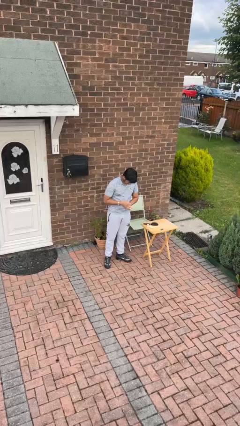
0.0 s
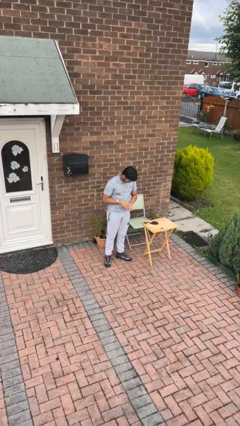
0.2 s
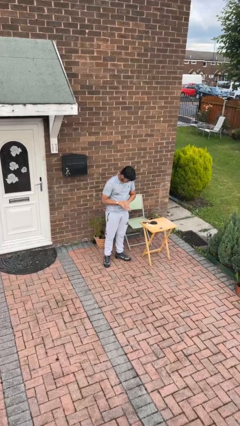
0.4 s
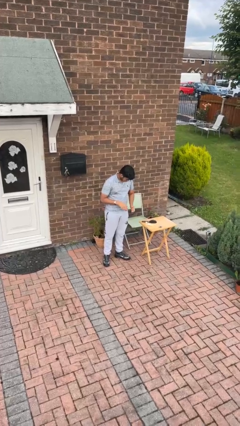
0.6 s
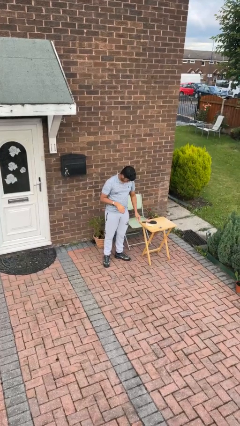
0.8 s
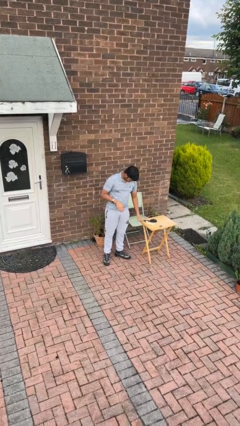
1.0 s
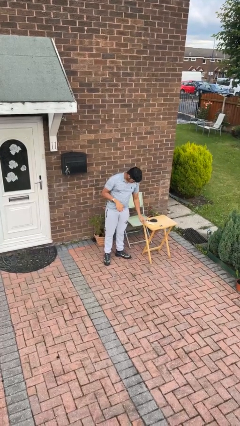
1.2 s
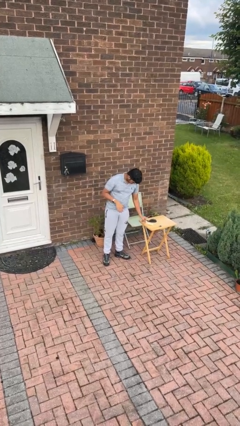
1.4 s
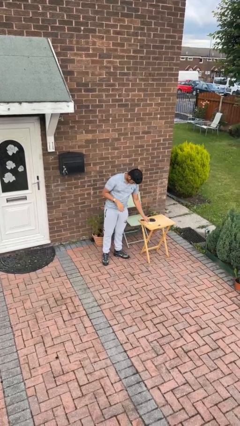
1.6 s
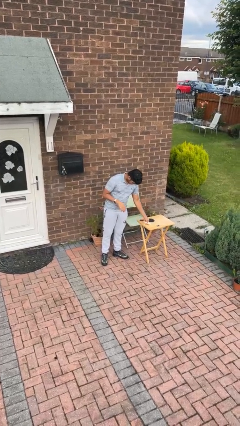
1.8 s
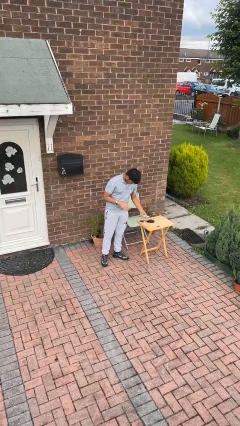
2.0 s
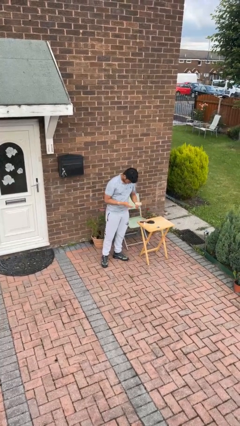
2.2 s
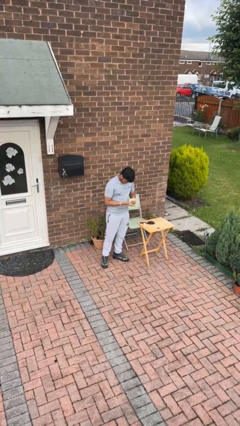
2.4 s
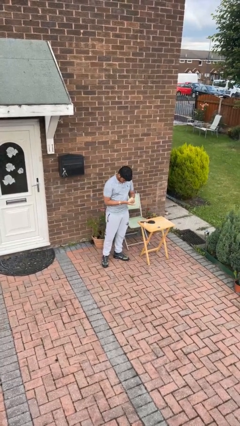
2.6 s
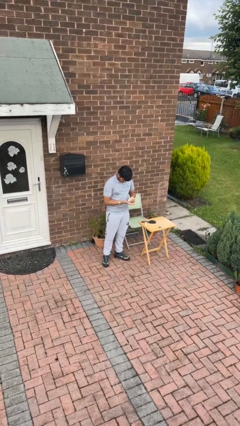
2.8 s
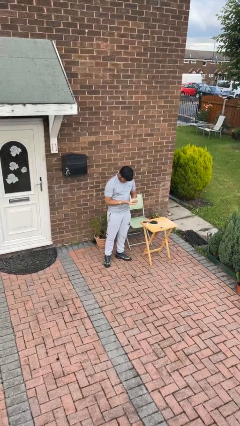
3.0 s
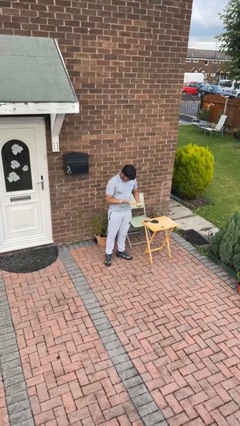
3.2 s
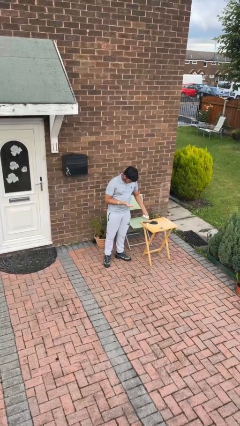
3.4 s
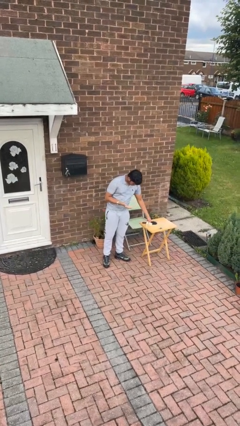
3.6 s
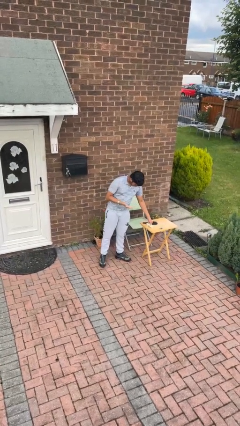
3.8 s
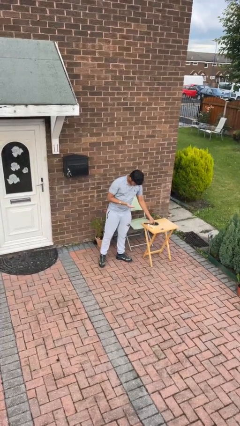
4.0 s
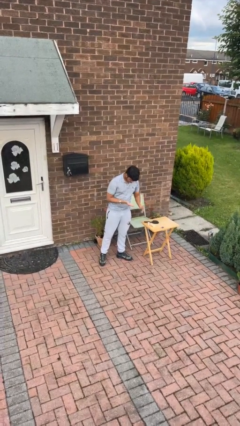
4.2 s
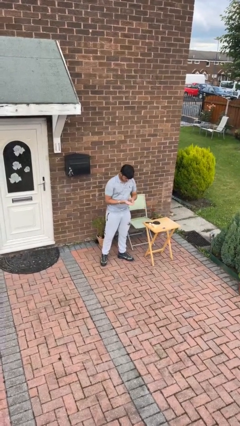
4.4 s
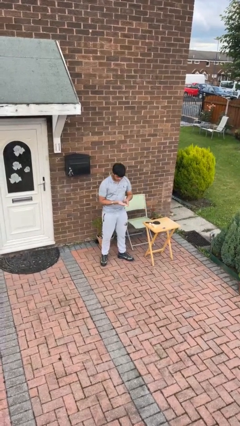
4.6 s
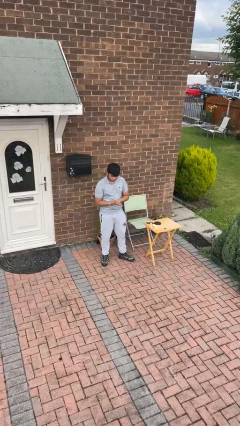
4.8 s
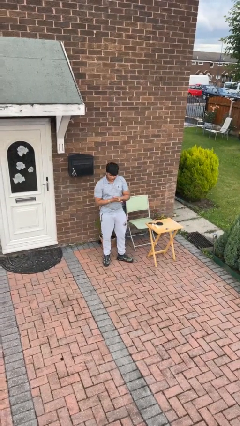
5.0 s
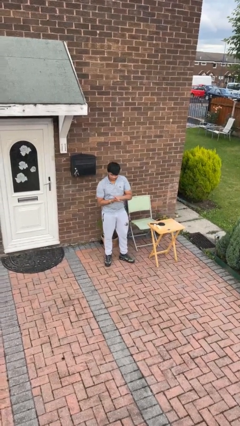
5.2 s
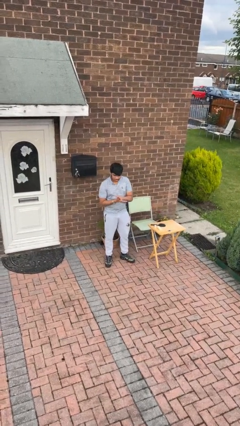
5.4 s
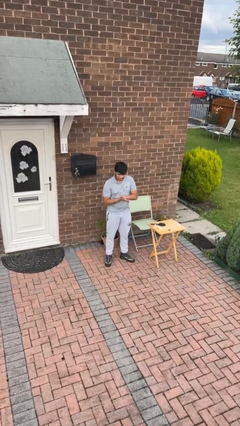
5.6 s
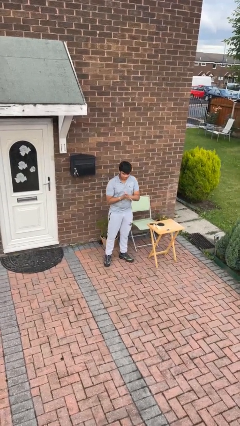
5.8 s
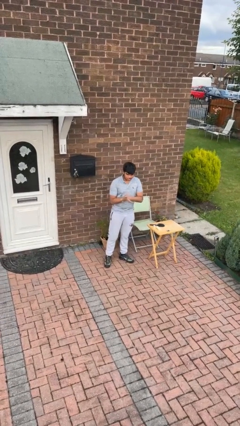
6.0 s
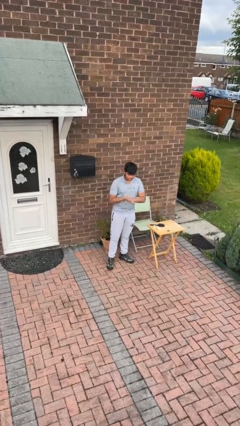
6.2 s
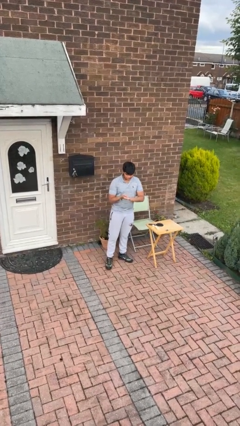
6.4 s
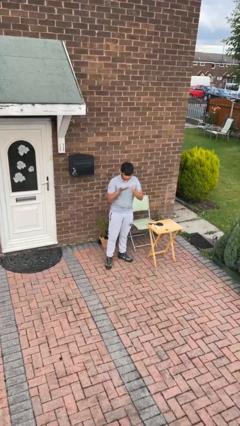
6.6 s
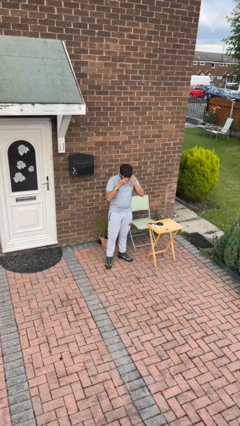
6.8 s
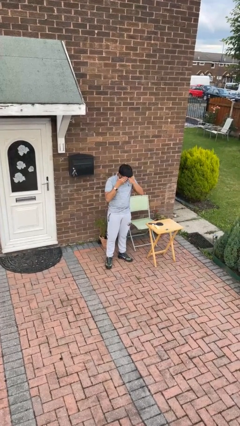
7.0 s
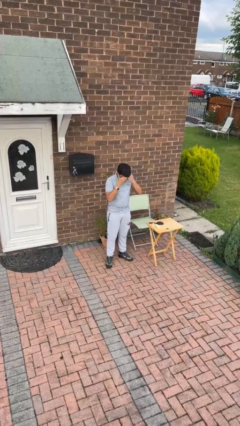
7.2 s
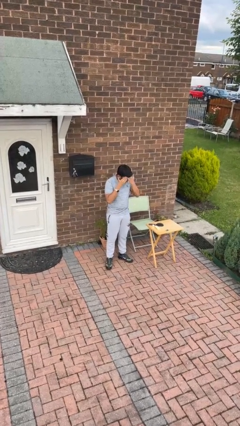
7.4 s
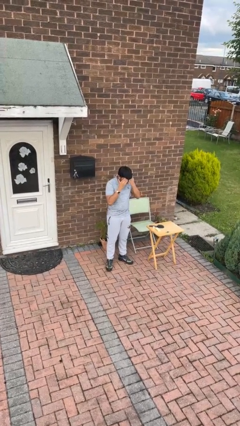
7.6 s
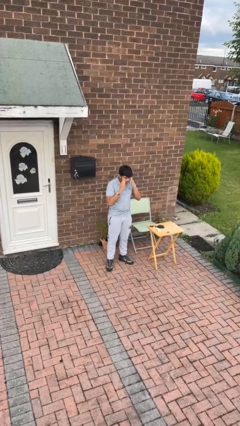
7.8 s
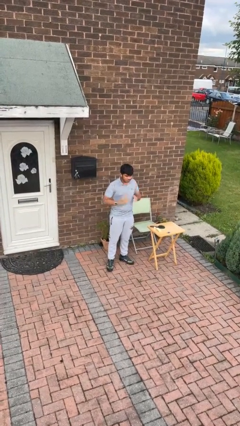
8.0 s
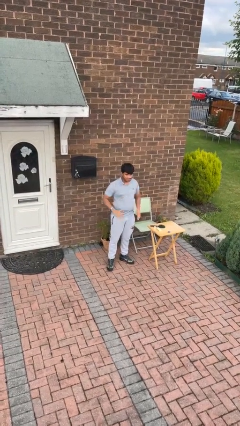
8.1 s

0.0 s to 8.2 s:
person applies facial moisturizer

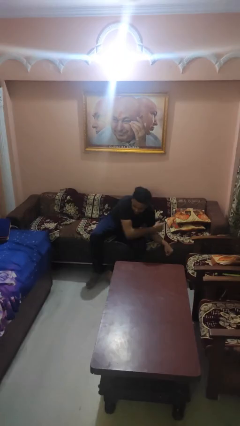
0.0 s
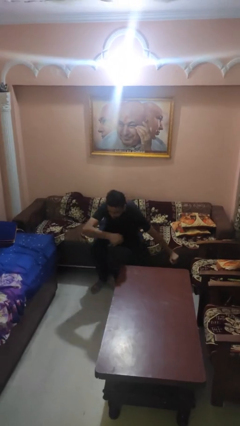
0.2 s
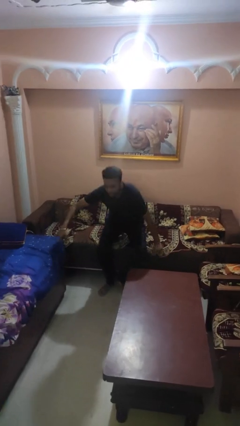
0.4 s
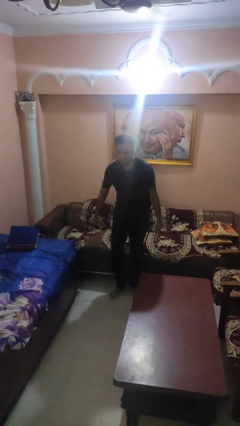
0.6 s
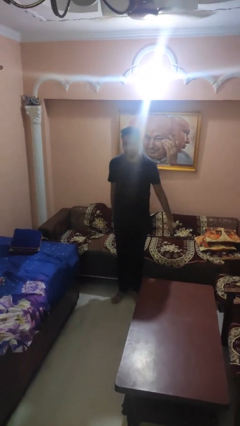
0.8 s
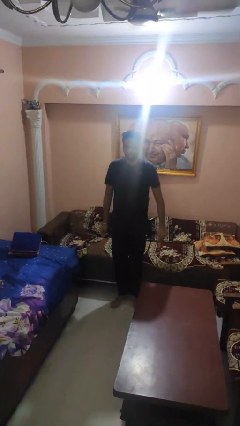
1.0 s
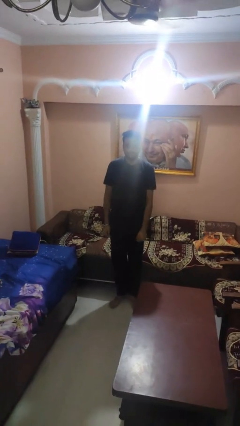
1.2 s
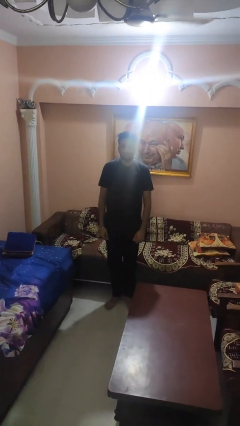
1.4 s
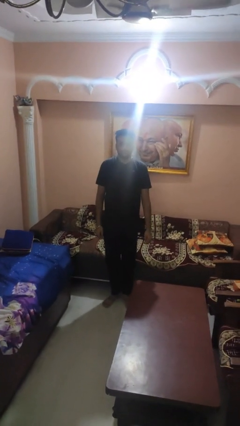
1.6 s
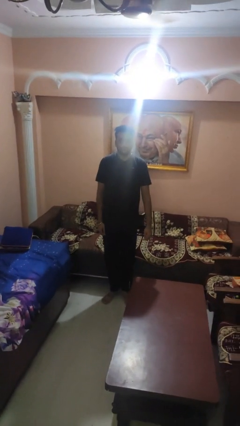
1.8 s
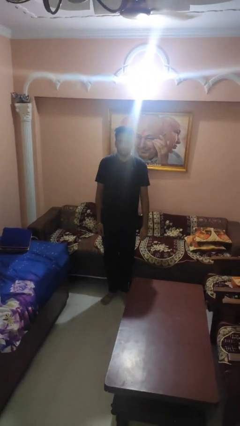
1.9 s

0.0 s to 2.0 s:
person stands up

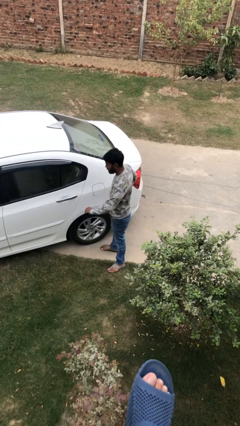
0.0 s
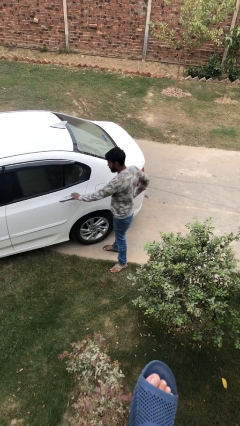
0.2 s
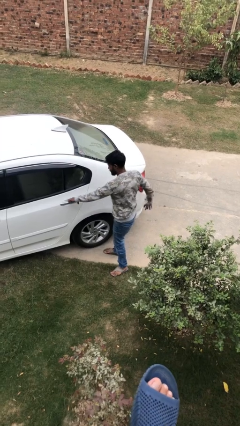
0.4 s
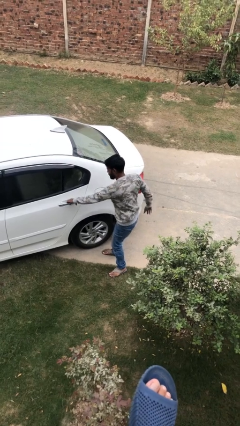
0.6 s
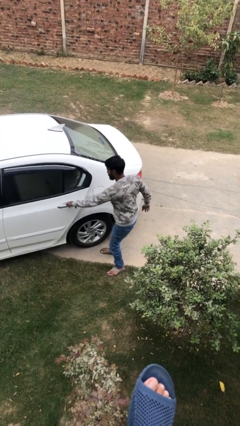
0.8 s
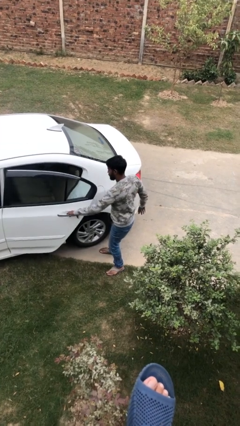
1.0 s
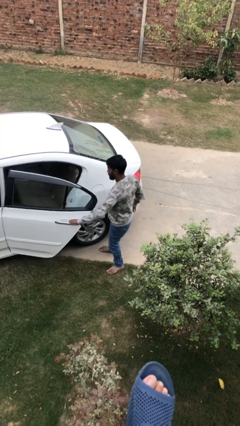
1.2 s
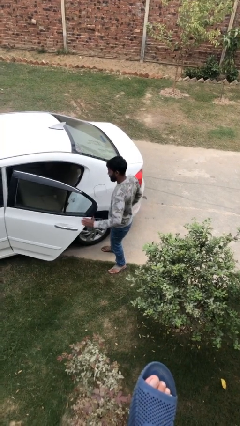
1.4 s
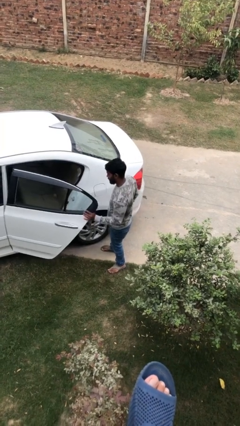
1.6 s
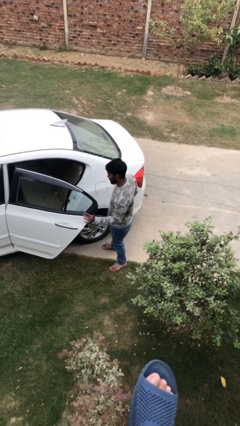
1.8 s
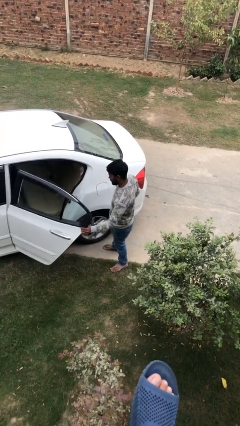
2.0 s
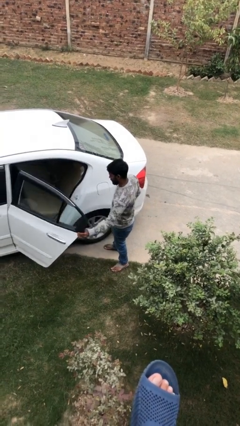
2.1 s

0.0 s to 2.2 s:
person opens car door

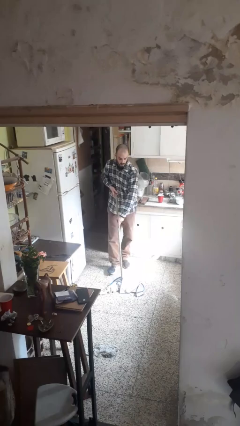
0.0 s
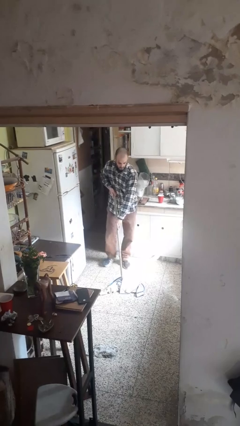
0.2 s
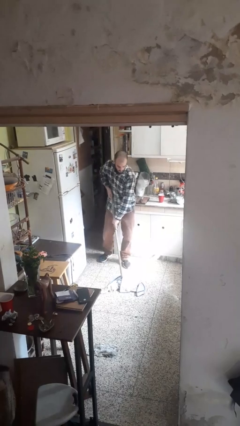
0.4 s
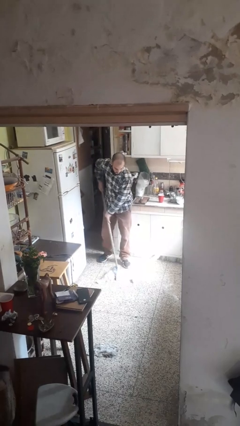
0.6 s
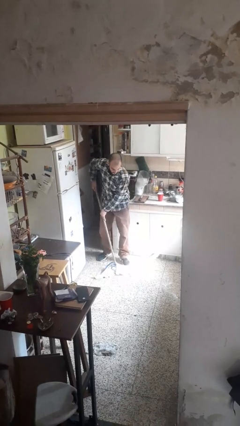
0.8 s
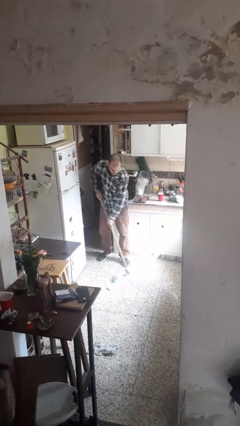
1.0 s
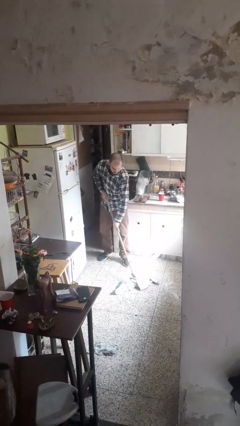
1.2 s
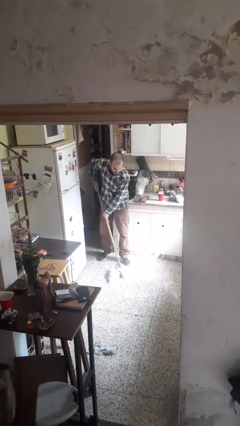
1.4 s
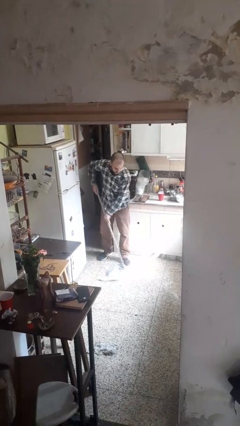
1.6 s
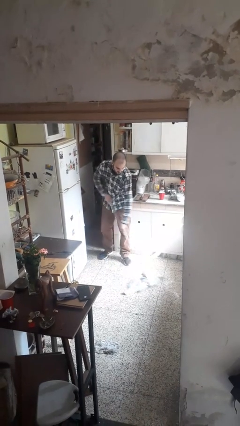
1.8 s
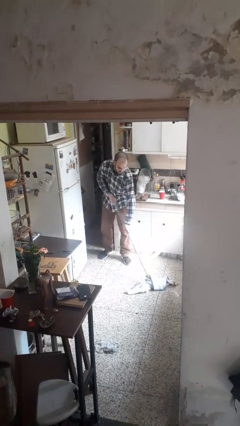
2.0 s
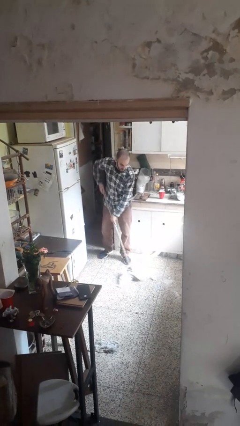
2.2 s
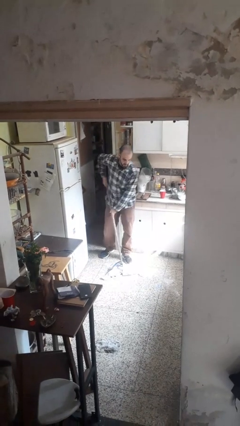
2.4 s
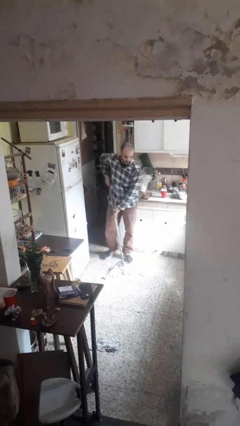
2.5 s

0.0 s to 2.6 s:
person mops

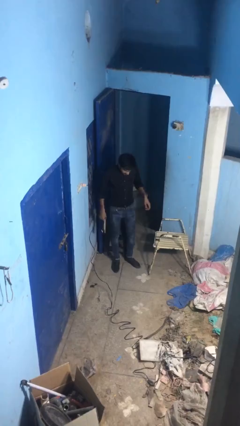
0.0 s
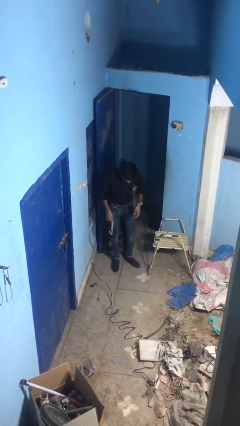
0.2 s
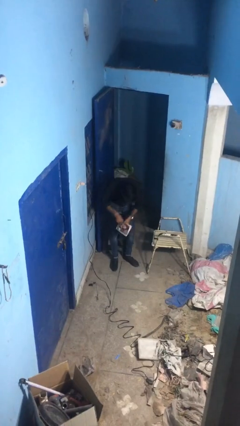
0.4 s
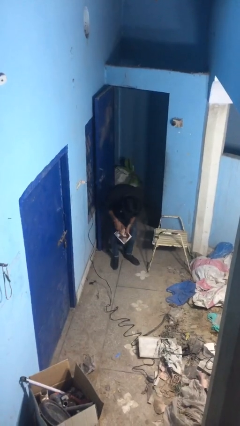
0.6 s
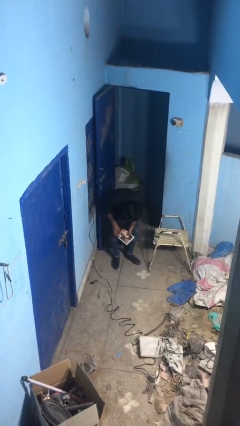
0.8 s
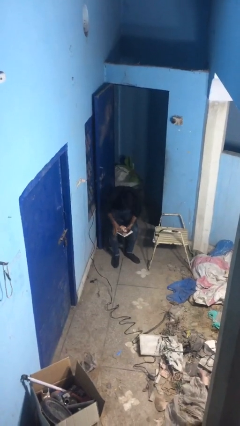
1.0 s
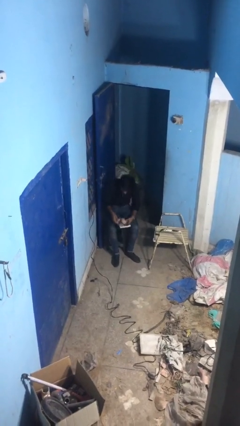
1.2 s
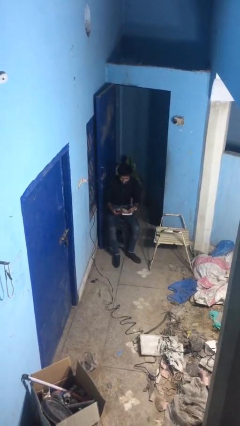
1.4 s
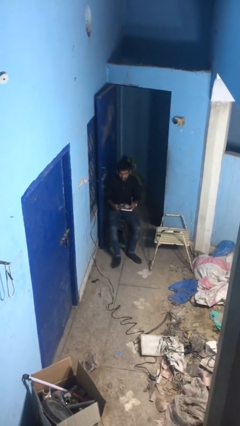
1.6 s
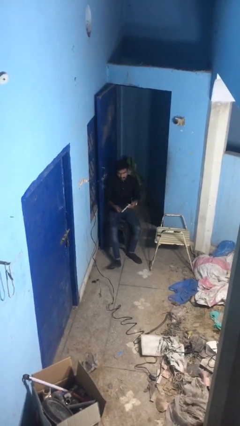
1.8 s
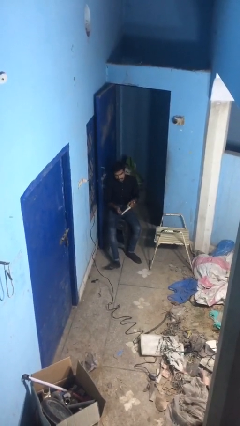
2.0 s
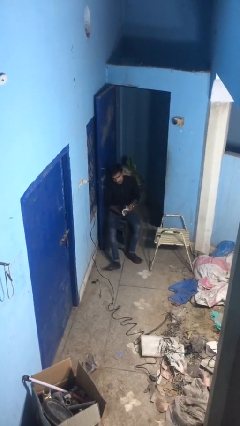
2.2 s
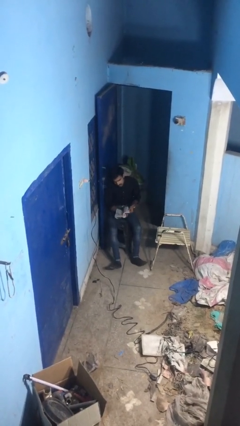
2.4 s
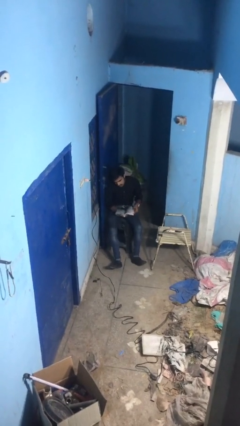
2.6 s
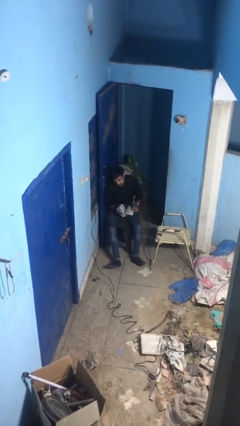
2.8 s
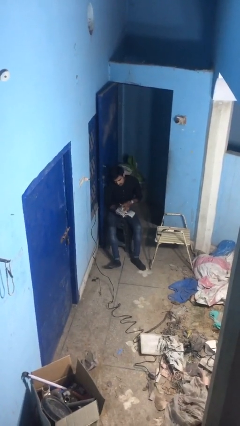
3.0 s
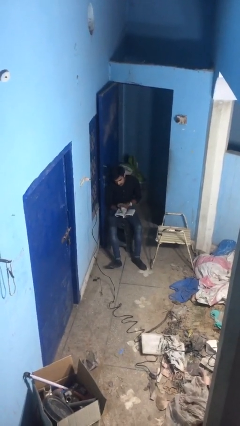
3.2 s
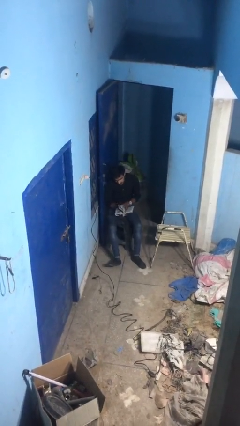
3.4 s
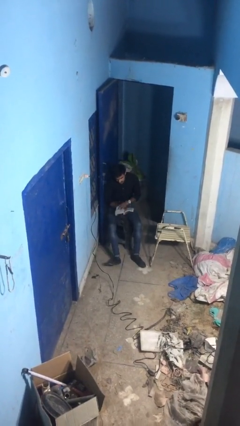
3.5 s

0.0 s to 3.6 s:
person sits down
